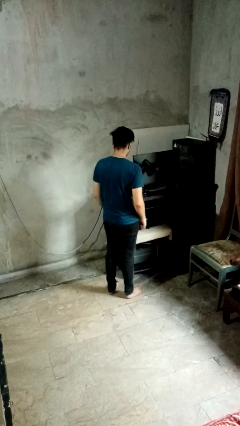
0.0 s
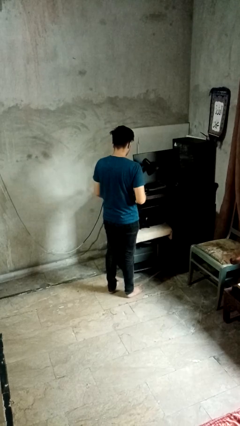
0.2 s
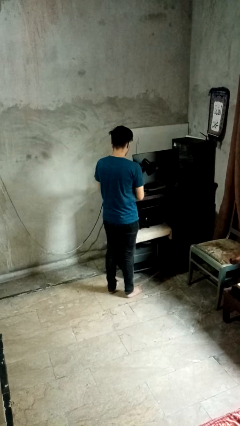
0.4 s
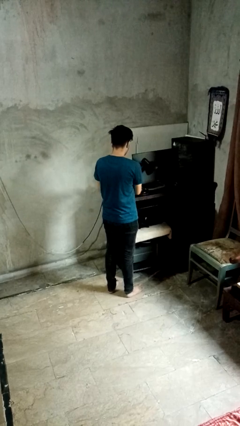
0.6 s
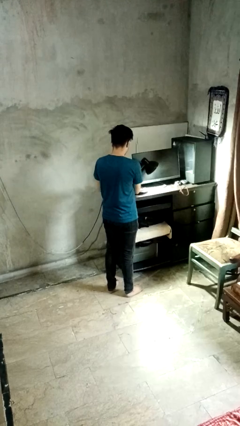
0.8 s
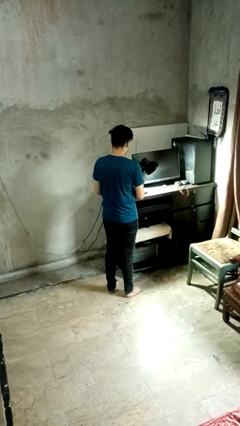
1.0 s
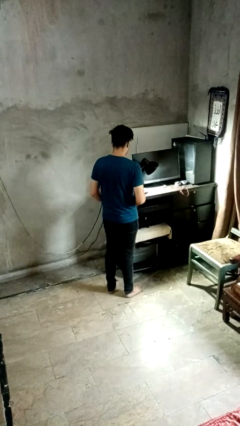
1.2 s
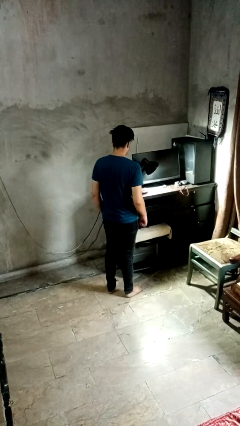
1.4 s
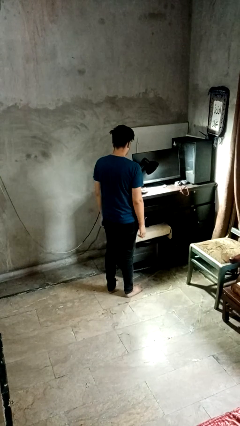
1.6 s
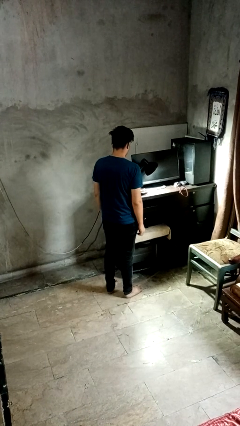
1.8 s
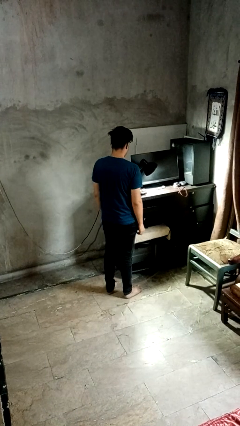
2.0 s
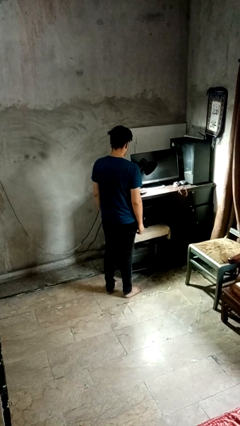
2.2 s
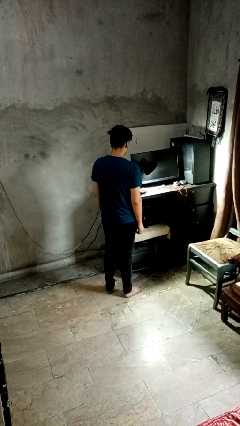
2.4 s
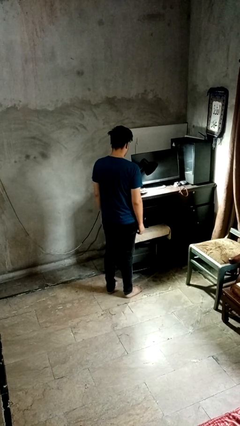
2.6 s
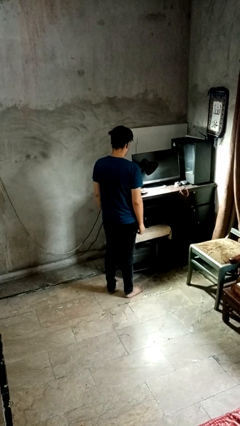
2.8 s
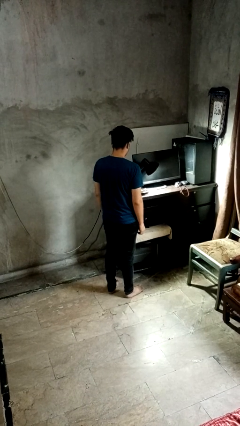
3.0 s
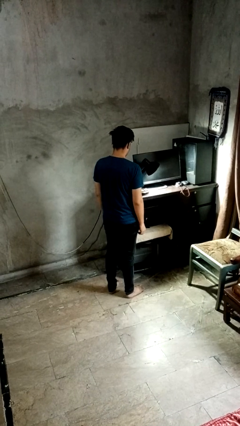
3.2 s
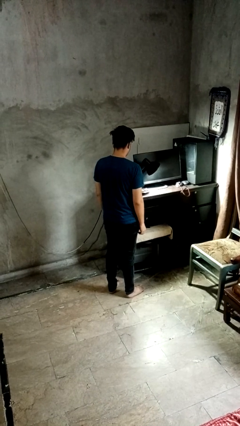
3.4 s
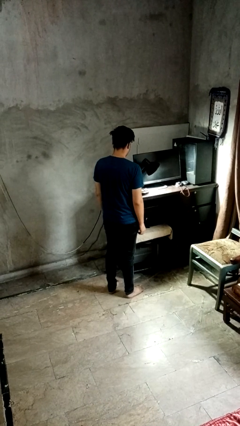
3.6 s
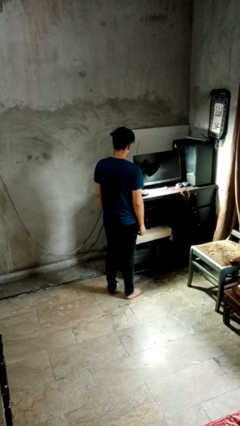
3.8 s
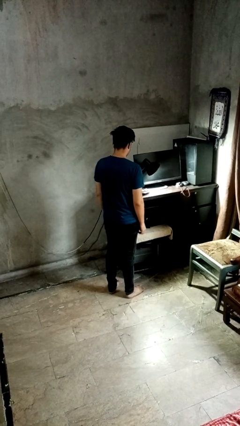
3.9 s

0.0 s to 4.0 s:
person turns on lamp

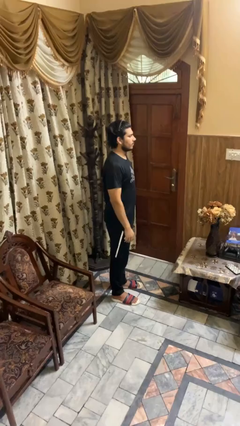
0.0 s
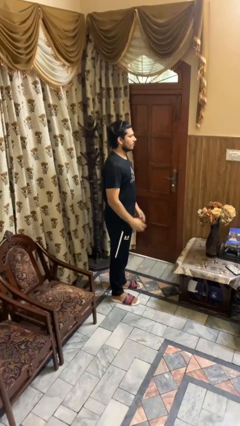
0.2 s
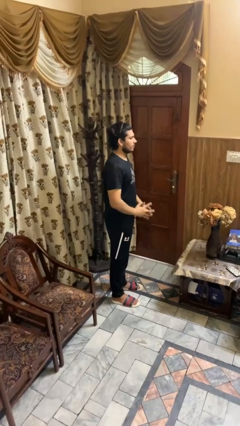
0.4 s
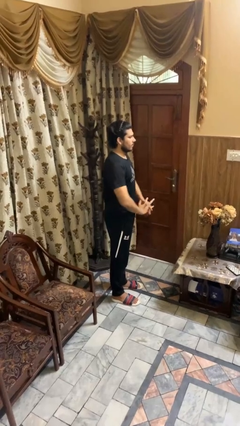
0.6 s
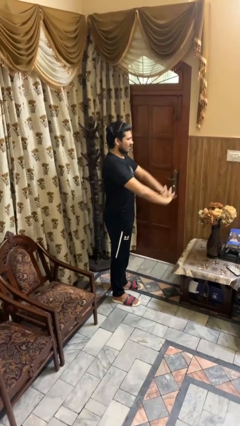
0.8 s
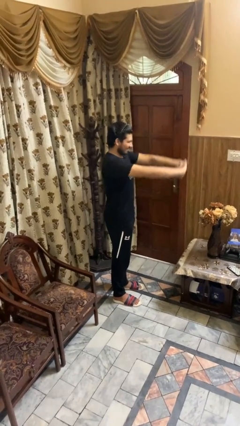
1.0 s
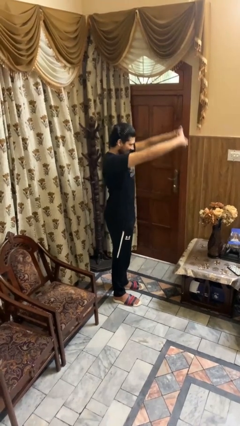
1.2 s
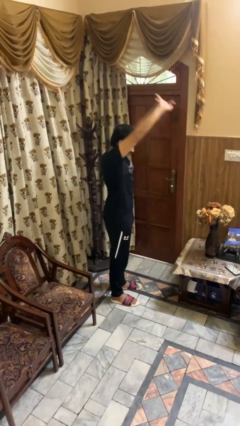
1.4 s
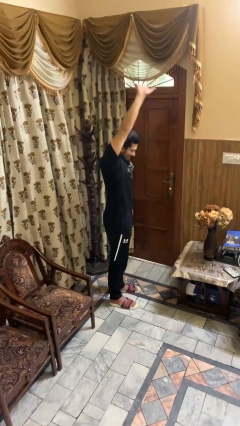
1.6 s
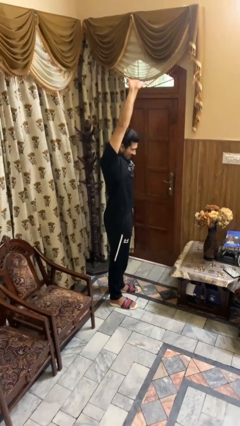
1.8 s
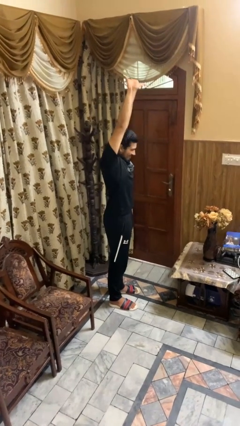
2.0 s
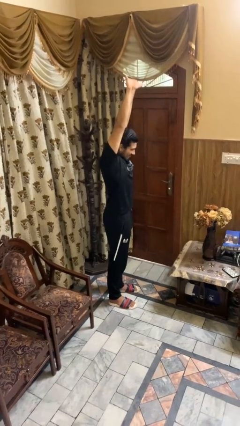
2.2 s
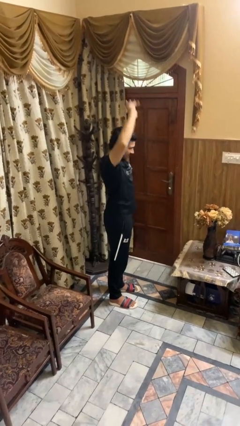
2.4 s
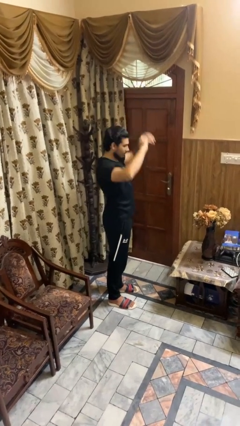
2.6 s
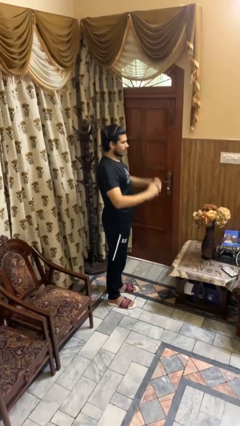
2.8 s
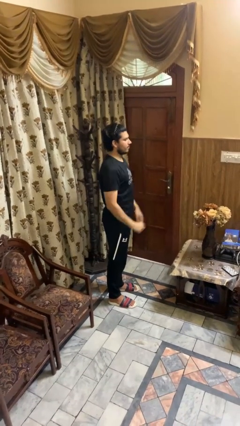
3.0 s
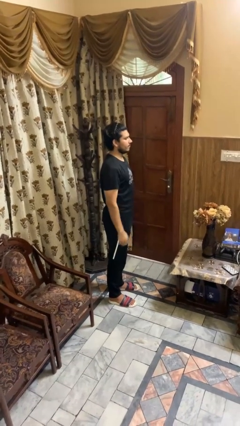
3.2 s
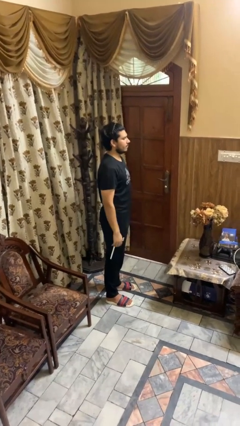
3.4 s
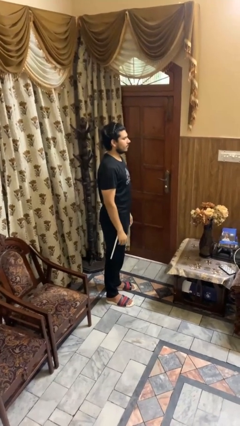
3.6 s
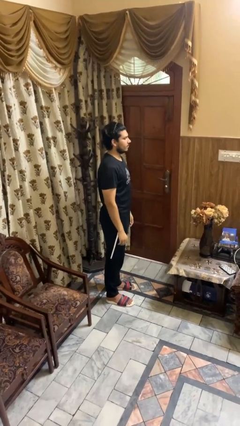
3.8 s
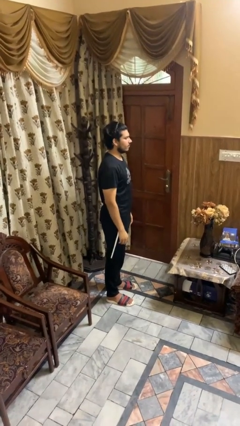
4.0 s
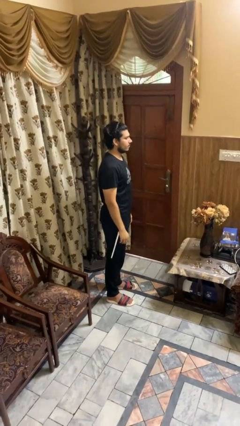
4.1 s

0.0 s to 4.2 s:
person stretches arms over head

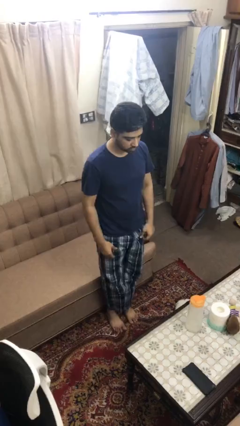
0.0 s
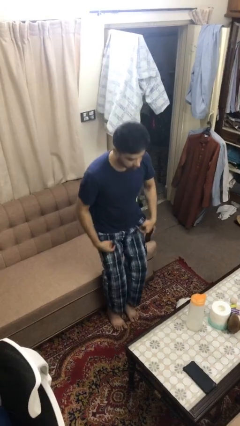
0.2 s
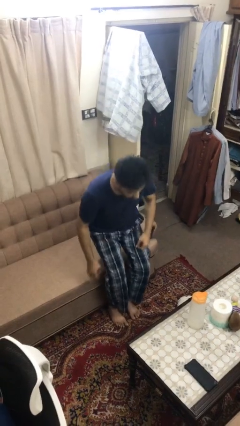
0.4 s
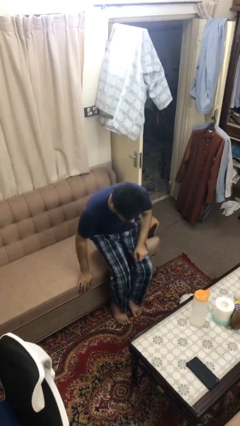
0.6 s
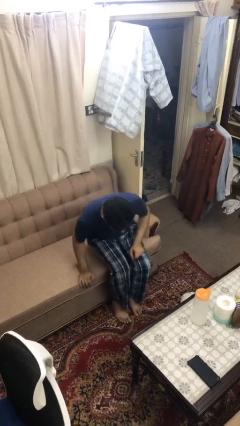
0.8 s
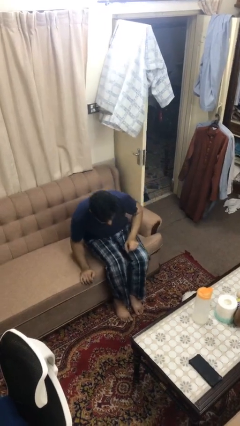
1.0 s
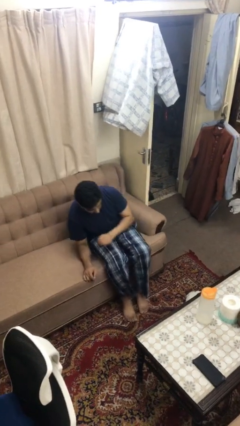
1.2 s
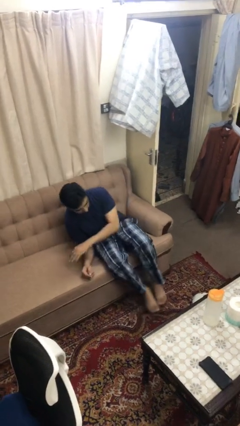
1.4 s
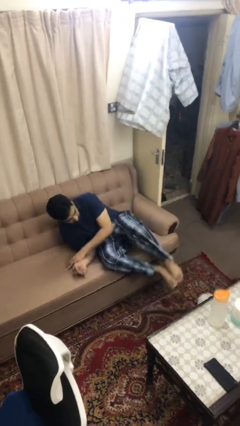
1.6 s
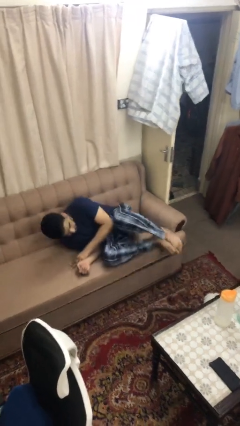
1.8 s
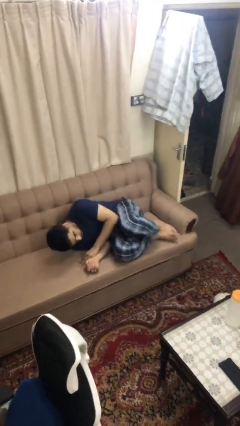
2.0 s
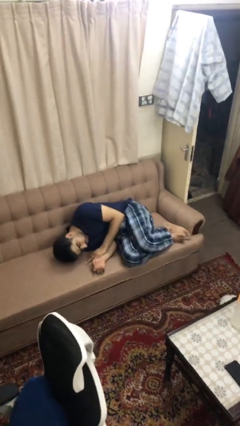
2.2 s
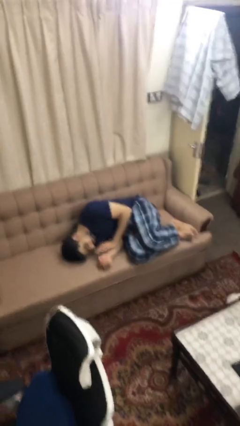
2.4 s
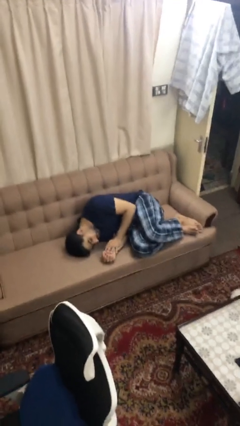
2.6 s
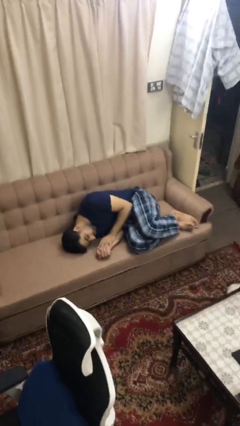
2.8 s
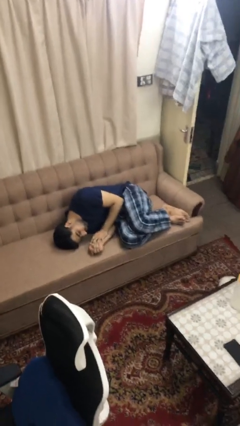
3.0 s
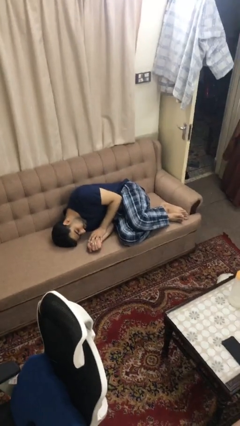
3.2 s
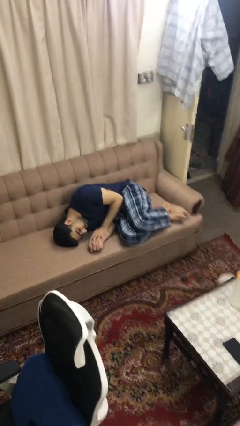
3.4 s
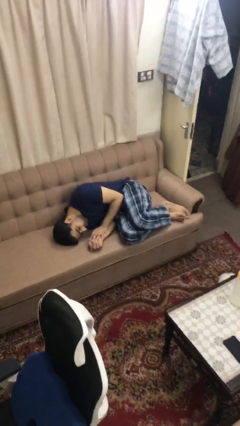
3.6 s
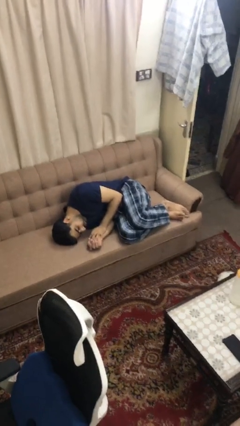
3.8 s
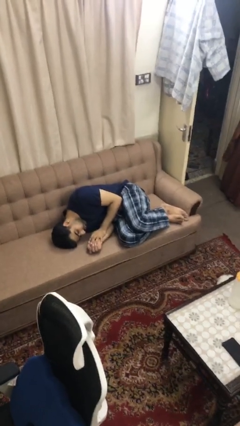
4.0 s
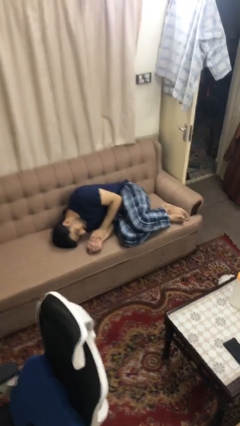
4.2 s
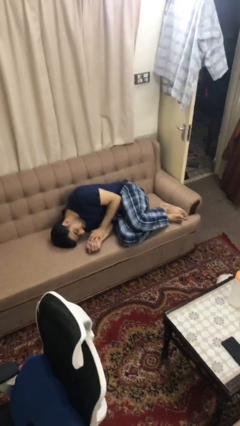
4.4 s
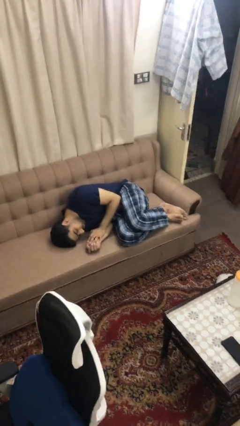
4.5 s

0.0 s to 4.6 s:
person lies down on couch

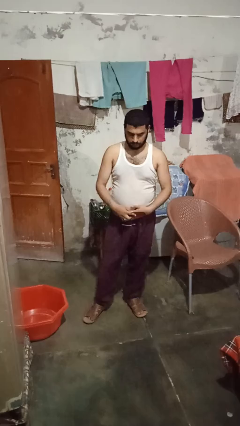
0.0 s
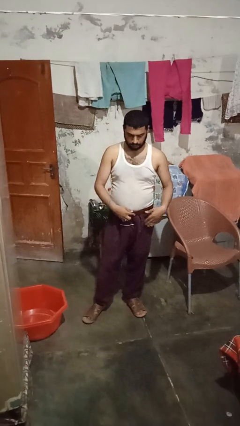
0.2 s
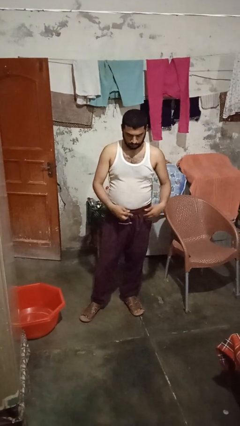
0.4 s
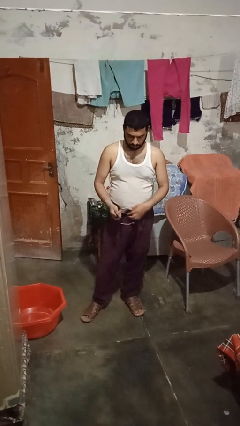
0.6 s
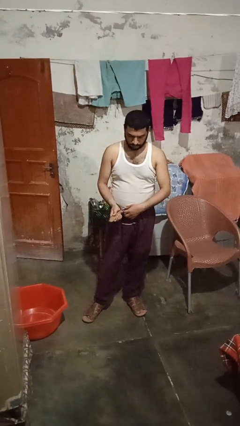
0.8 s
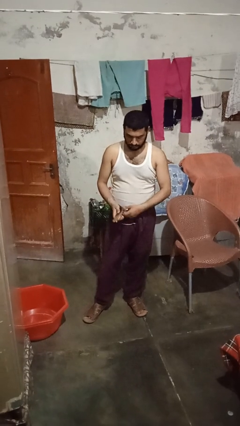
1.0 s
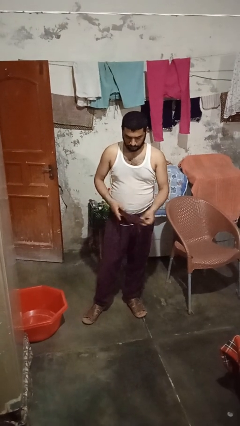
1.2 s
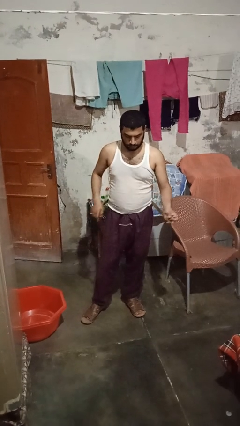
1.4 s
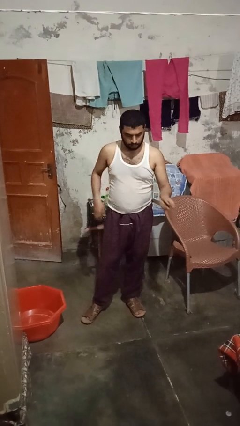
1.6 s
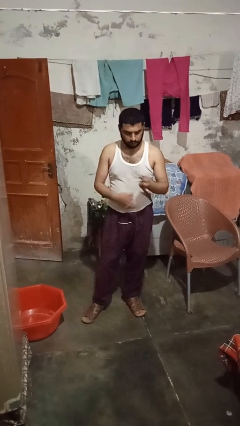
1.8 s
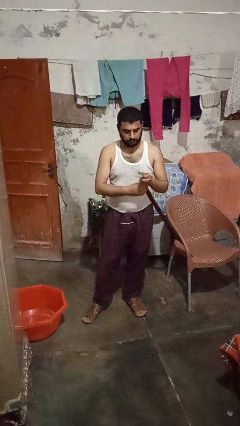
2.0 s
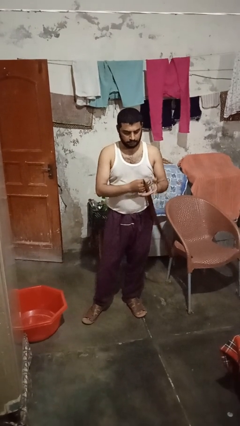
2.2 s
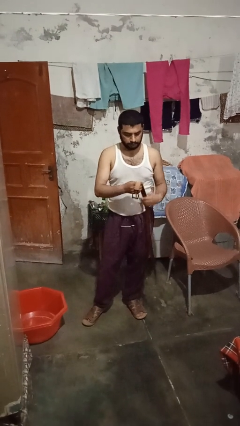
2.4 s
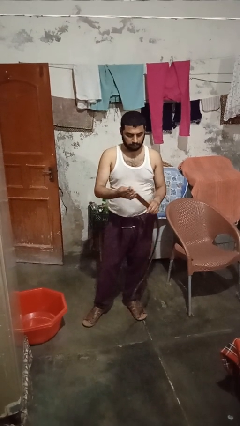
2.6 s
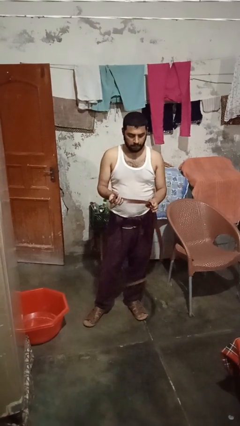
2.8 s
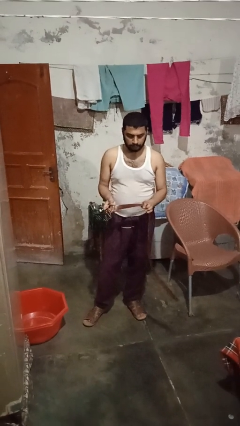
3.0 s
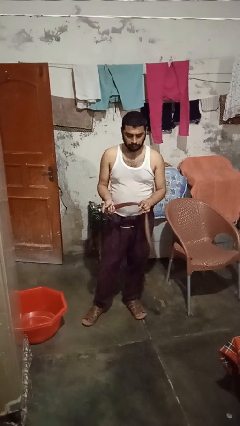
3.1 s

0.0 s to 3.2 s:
person takes off belt

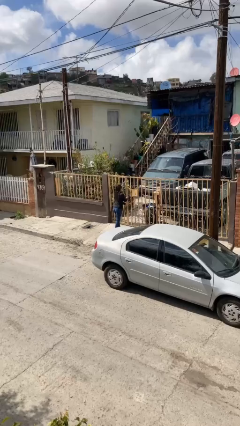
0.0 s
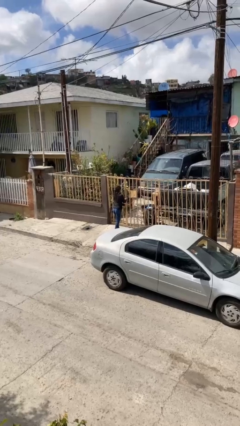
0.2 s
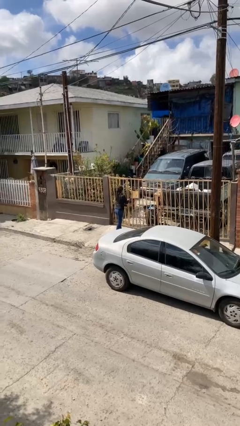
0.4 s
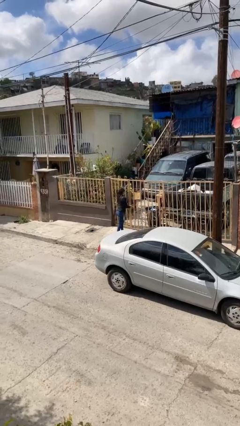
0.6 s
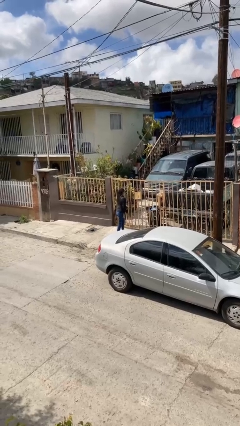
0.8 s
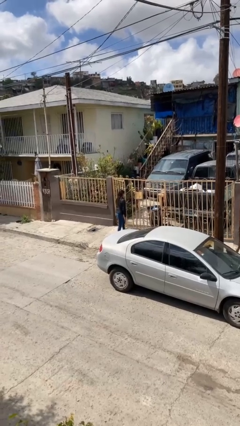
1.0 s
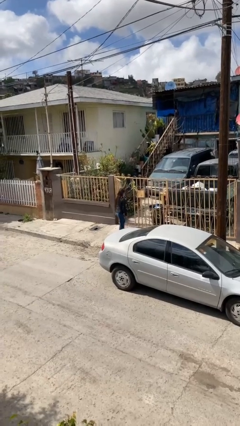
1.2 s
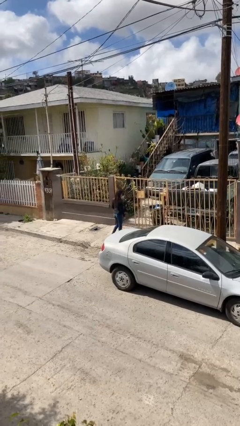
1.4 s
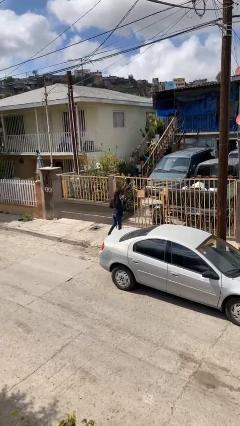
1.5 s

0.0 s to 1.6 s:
person opens facility door
